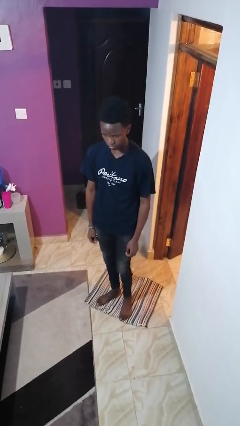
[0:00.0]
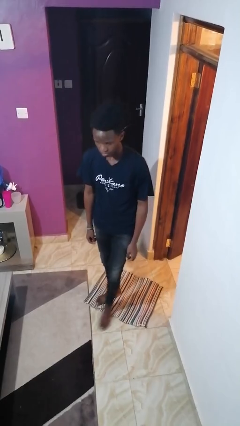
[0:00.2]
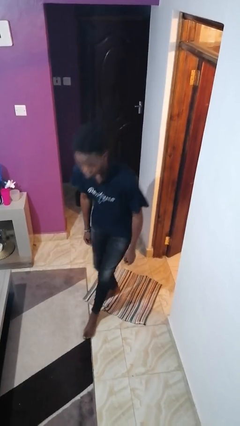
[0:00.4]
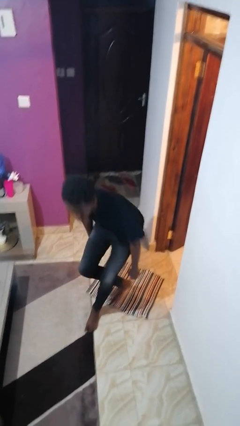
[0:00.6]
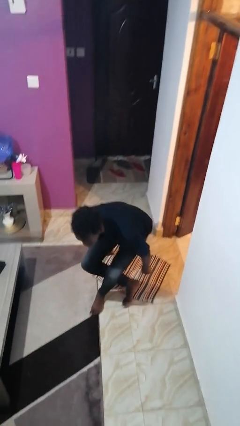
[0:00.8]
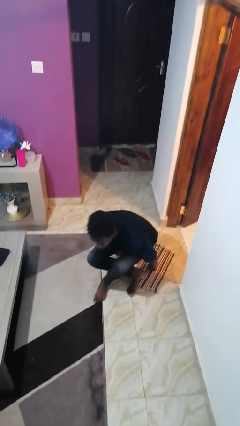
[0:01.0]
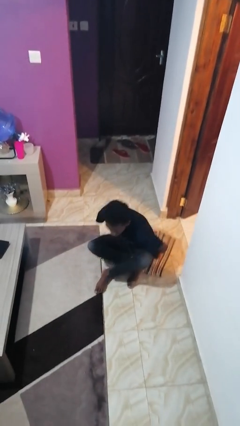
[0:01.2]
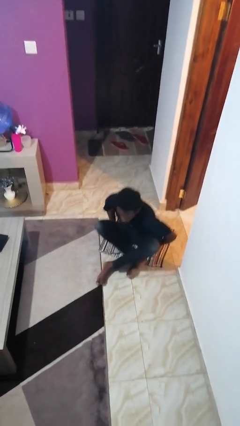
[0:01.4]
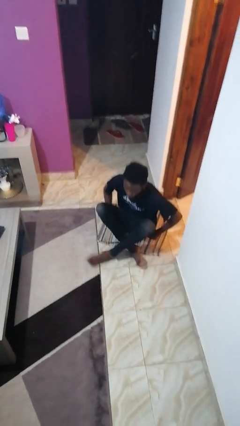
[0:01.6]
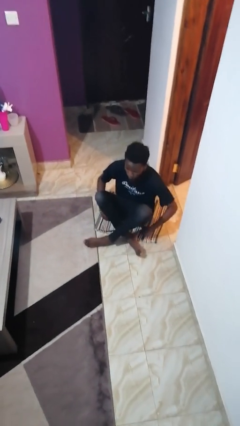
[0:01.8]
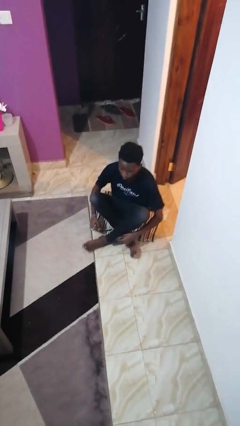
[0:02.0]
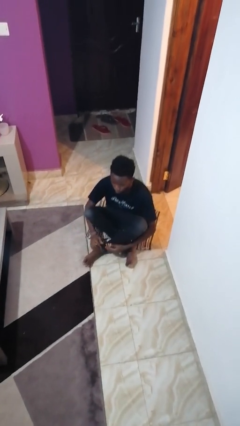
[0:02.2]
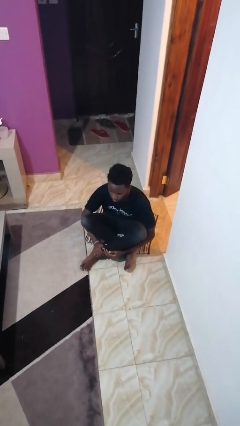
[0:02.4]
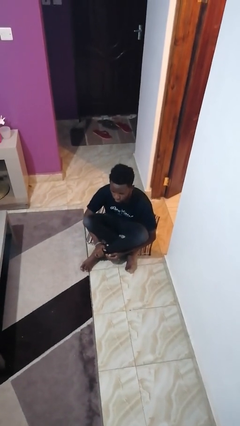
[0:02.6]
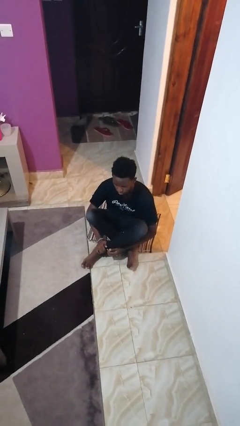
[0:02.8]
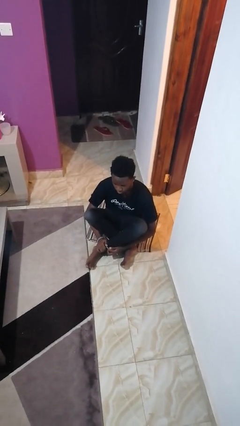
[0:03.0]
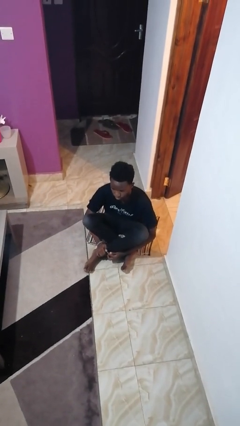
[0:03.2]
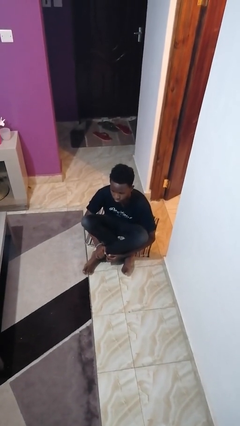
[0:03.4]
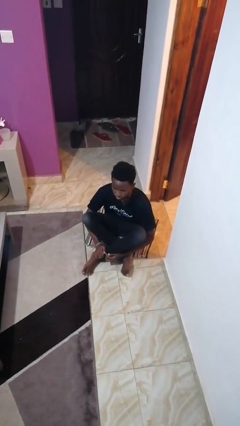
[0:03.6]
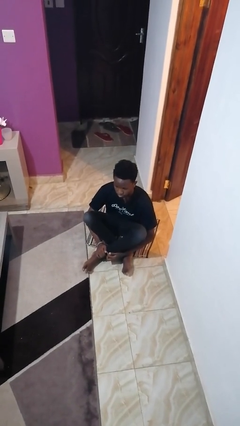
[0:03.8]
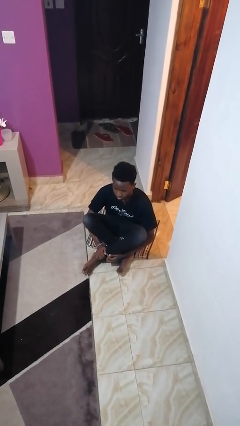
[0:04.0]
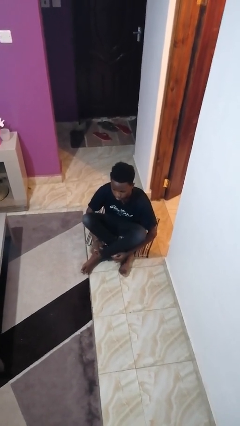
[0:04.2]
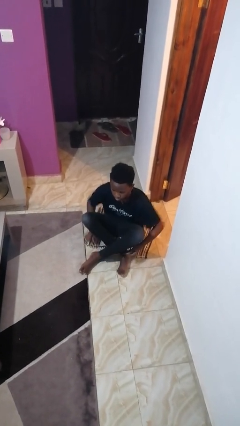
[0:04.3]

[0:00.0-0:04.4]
person sits crisscross

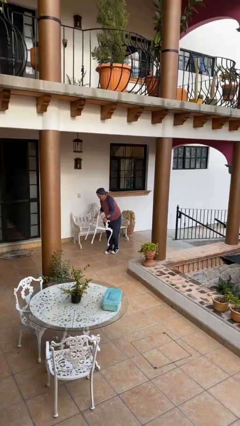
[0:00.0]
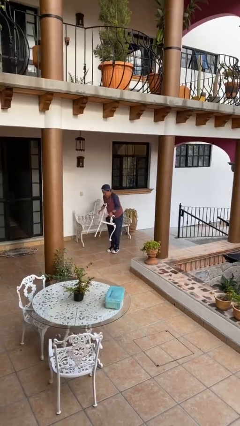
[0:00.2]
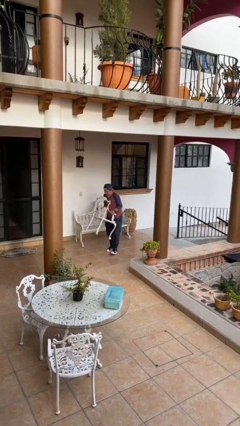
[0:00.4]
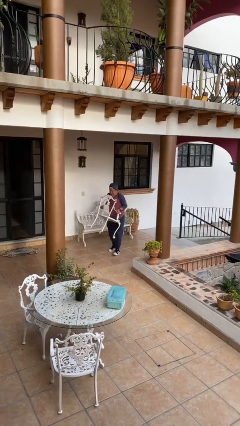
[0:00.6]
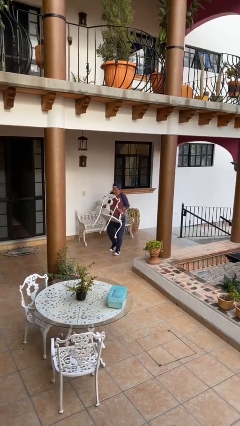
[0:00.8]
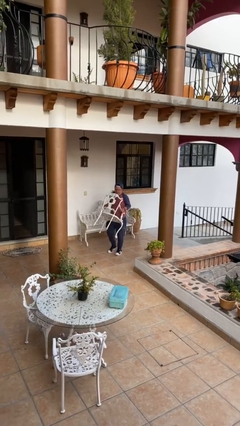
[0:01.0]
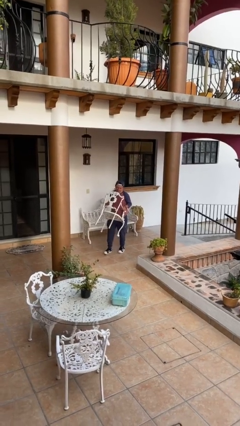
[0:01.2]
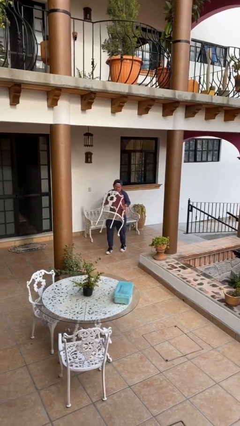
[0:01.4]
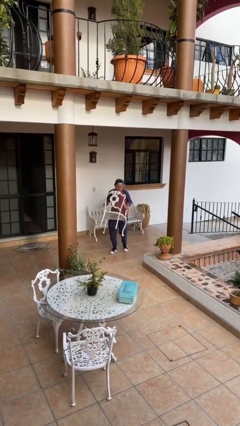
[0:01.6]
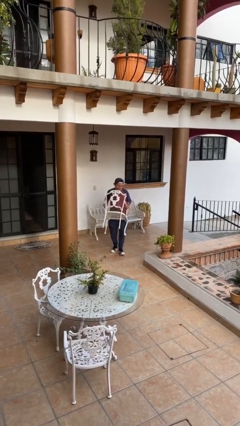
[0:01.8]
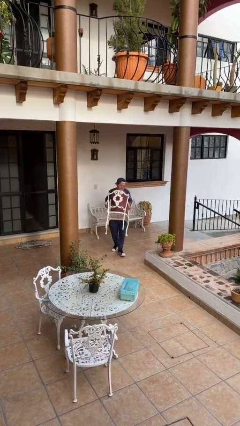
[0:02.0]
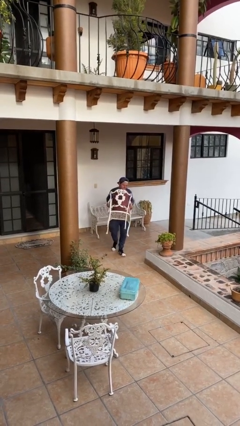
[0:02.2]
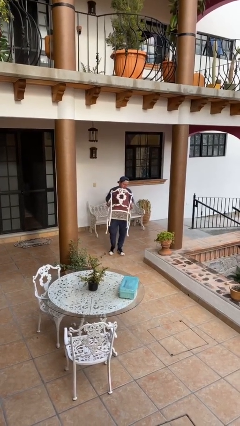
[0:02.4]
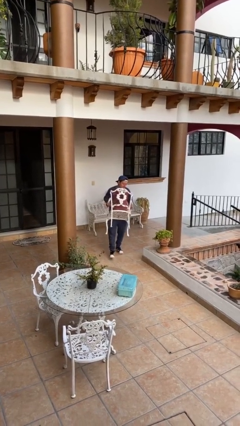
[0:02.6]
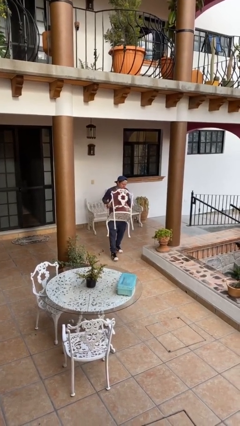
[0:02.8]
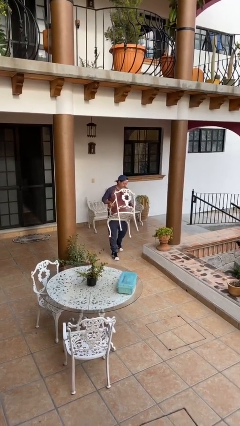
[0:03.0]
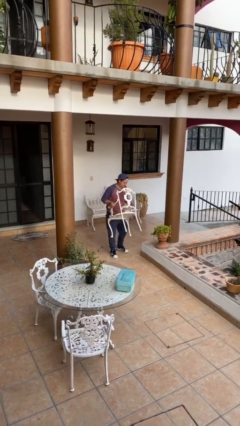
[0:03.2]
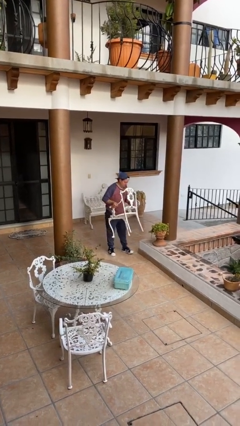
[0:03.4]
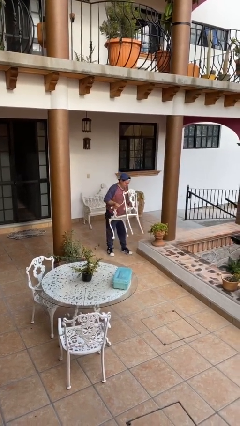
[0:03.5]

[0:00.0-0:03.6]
person carries heavy object

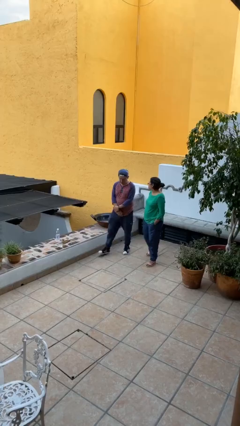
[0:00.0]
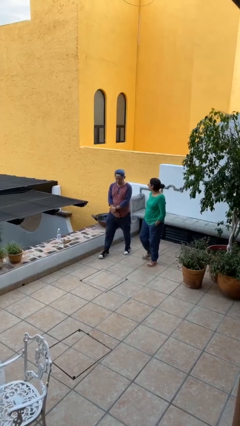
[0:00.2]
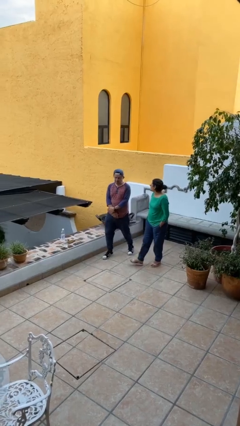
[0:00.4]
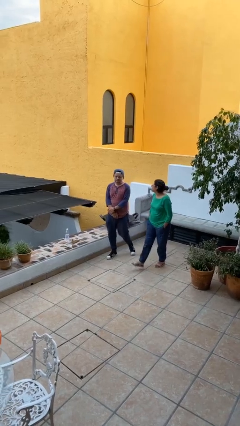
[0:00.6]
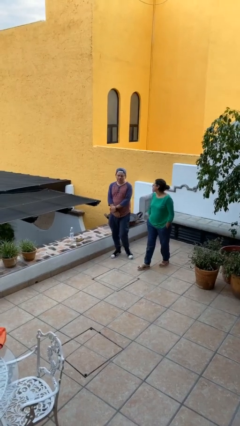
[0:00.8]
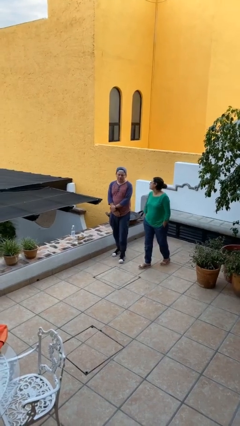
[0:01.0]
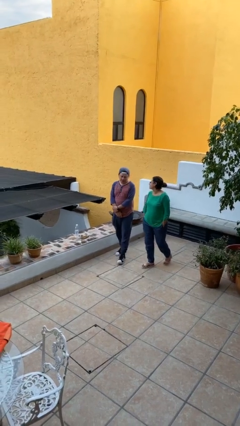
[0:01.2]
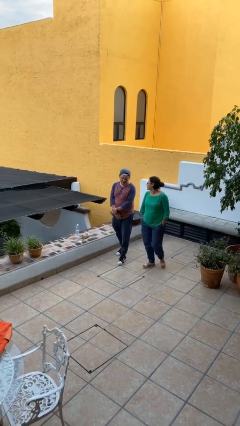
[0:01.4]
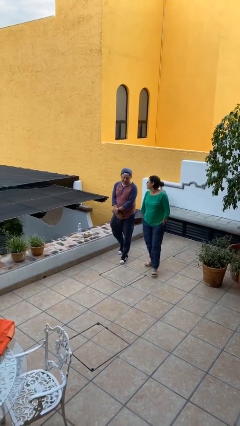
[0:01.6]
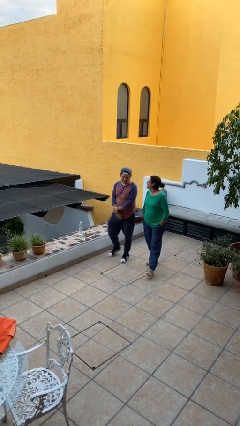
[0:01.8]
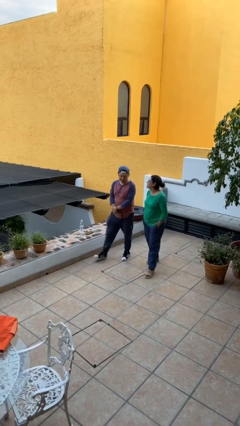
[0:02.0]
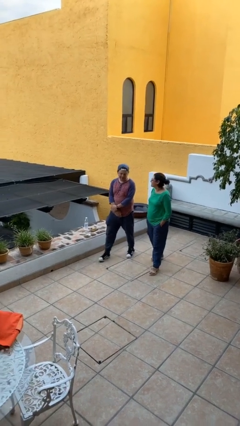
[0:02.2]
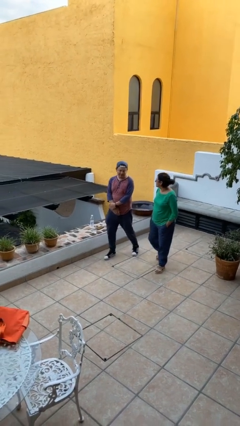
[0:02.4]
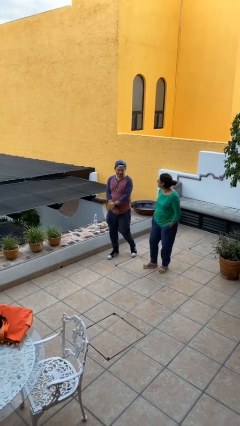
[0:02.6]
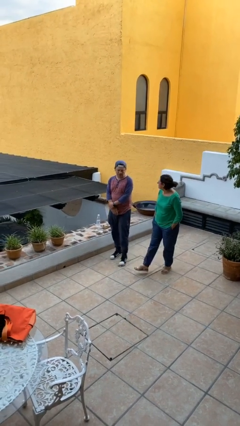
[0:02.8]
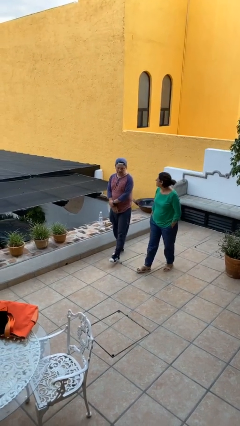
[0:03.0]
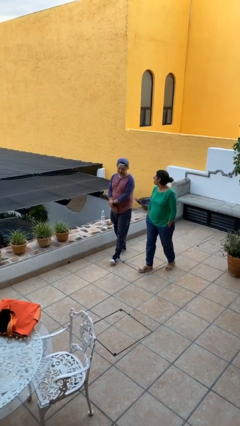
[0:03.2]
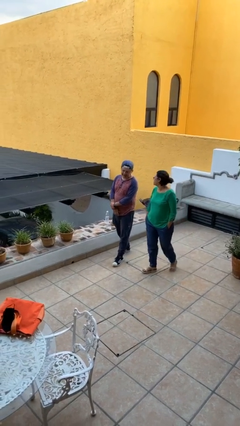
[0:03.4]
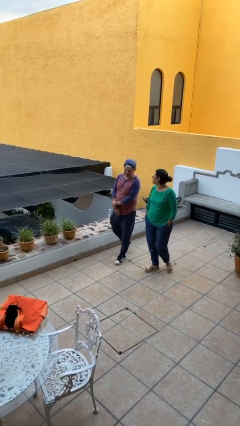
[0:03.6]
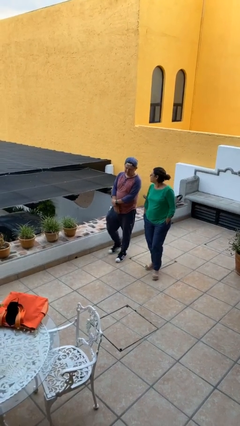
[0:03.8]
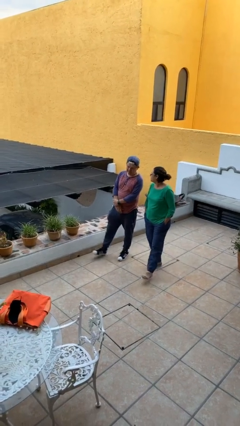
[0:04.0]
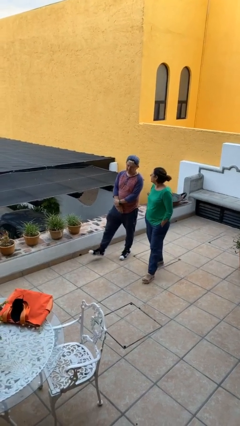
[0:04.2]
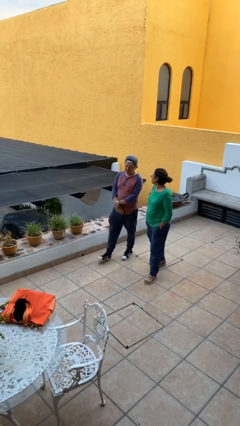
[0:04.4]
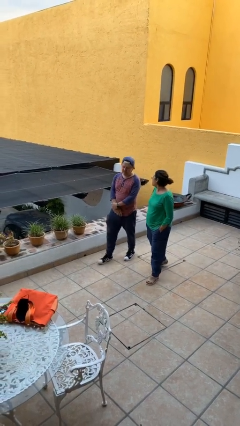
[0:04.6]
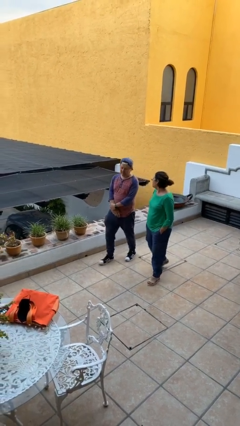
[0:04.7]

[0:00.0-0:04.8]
person talks to person

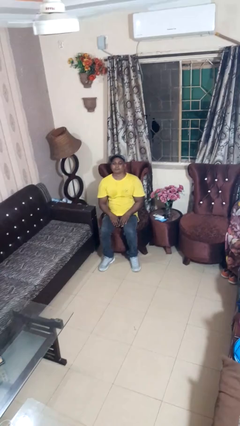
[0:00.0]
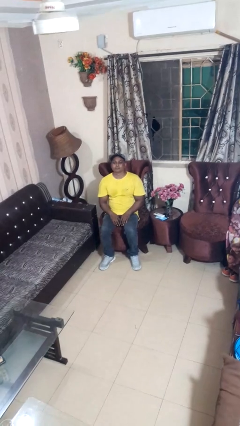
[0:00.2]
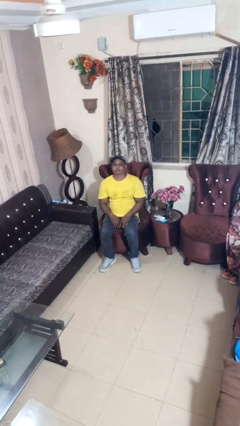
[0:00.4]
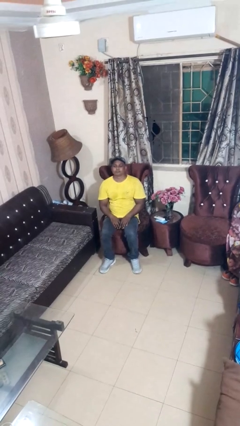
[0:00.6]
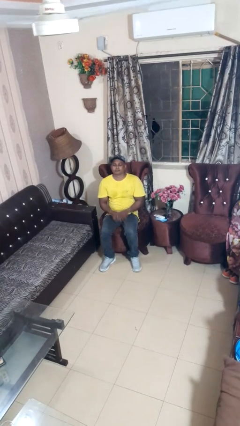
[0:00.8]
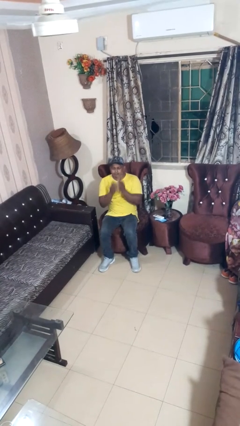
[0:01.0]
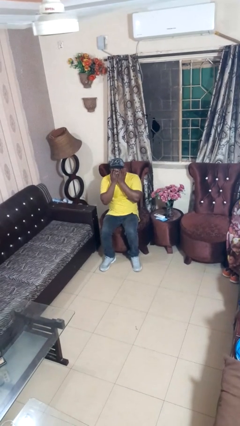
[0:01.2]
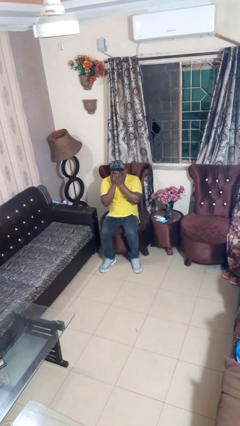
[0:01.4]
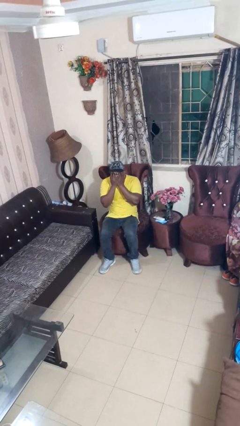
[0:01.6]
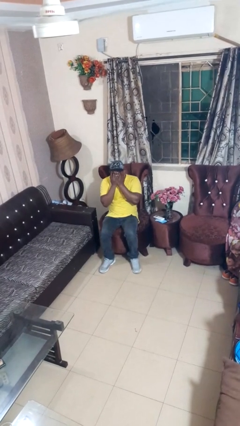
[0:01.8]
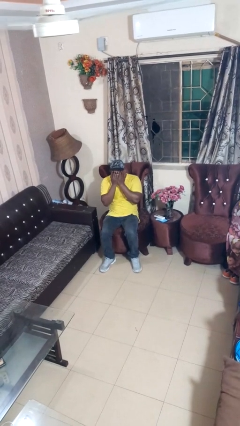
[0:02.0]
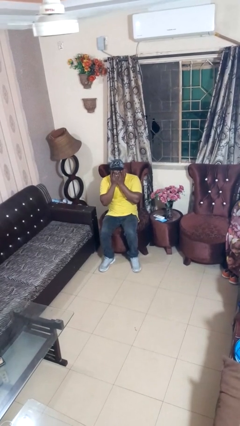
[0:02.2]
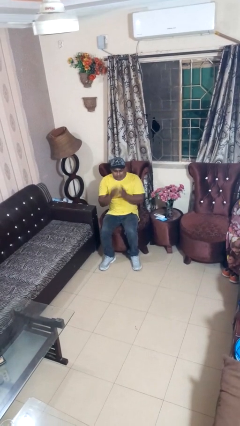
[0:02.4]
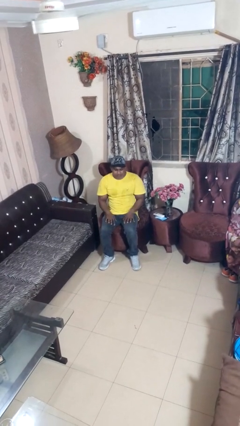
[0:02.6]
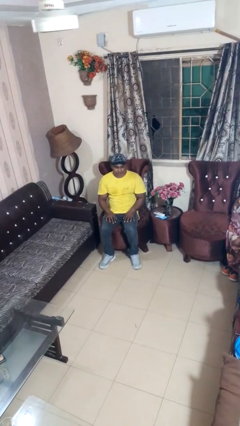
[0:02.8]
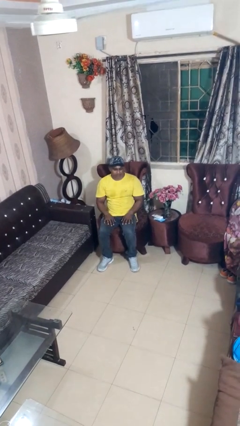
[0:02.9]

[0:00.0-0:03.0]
person covers face with hands

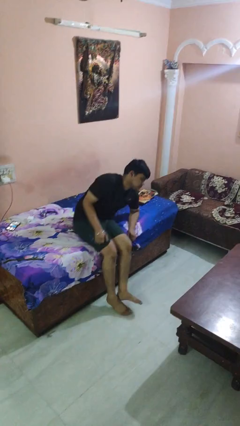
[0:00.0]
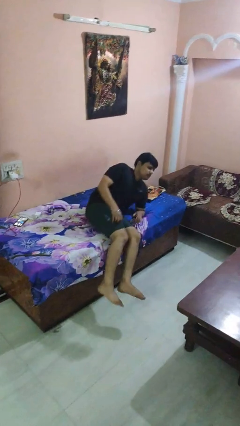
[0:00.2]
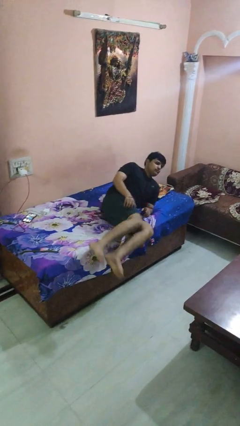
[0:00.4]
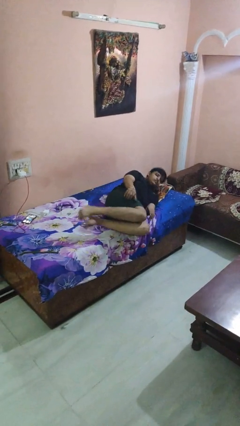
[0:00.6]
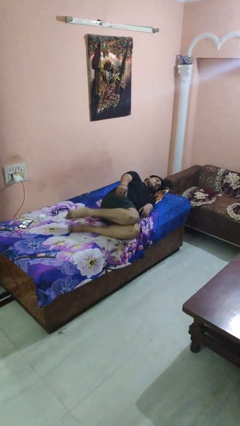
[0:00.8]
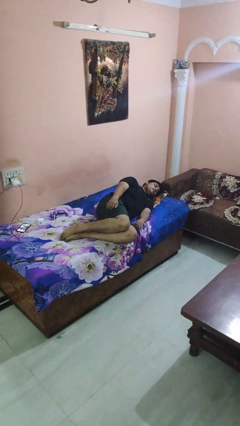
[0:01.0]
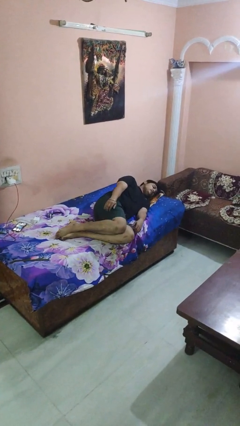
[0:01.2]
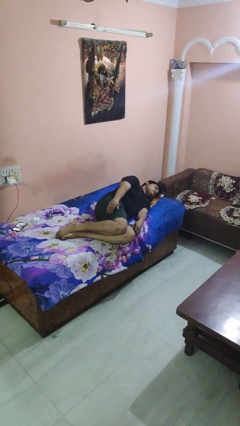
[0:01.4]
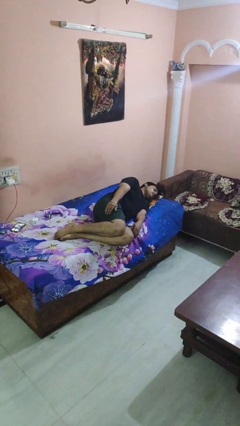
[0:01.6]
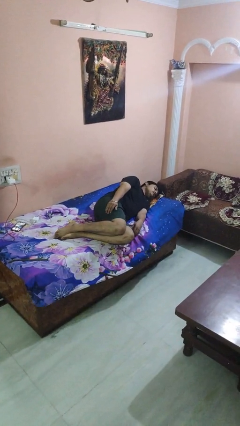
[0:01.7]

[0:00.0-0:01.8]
person lies down on bed
